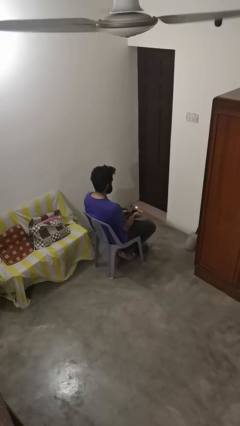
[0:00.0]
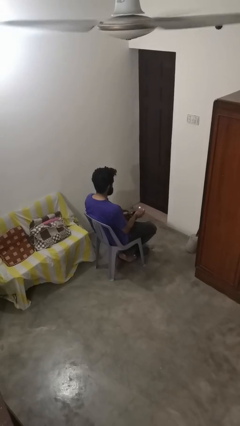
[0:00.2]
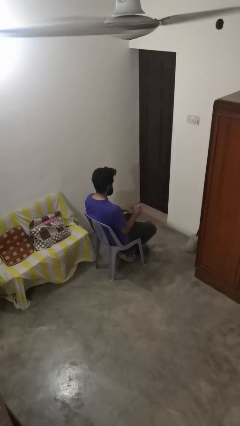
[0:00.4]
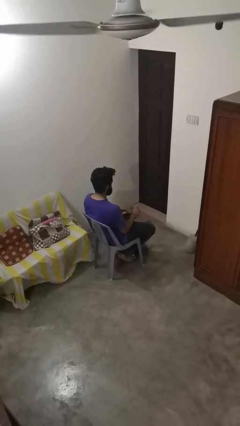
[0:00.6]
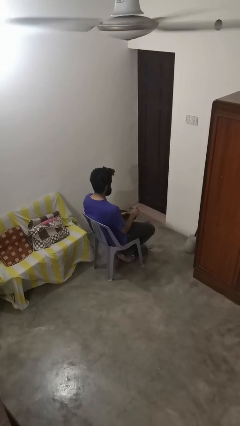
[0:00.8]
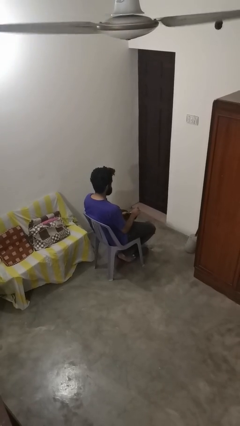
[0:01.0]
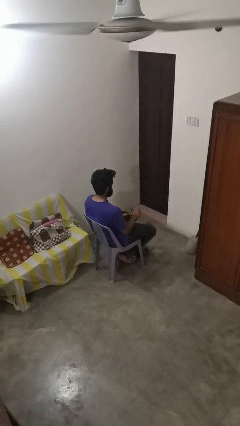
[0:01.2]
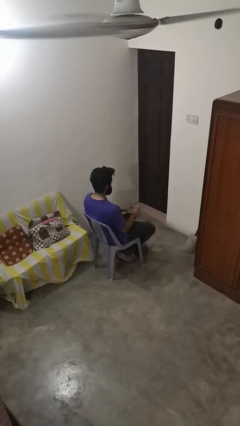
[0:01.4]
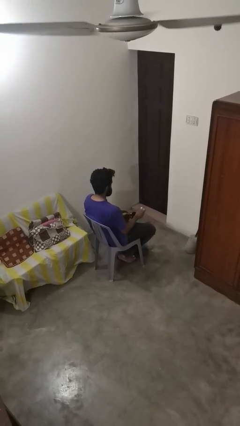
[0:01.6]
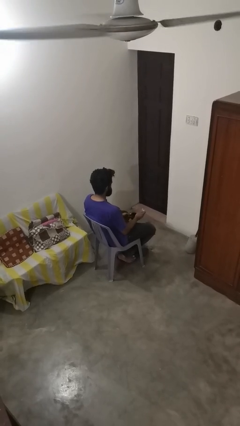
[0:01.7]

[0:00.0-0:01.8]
person stirs mug

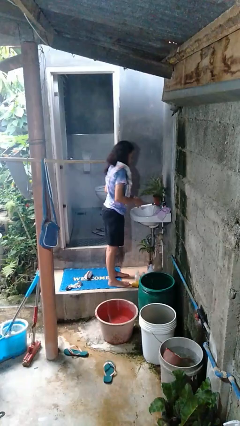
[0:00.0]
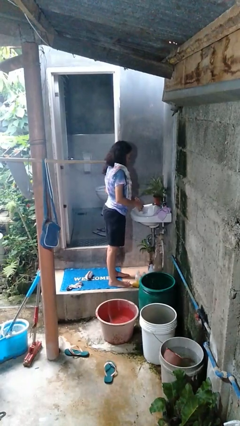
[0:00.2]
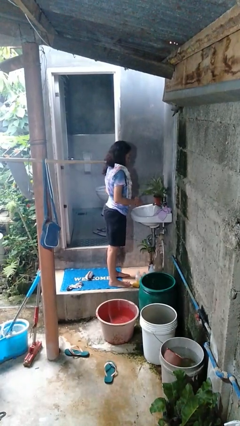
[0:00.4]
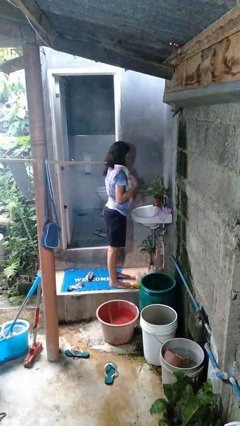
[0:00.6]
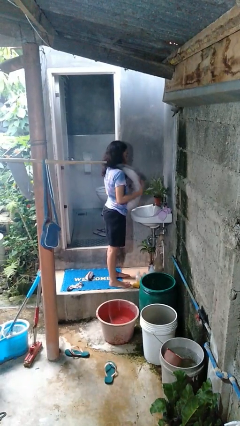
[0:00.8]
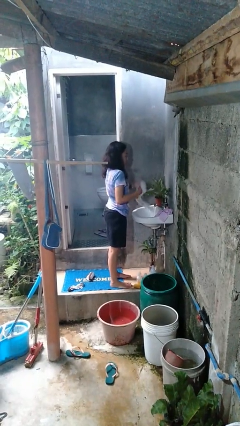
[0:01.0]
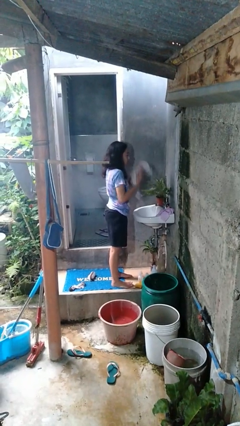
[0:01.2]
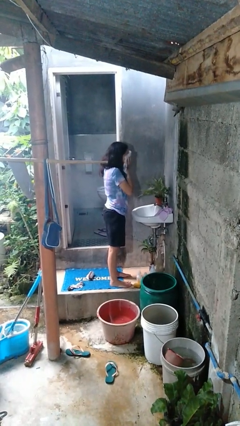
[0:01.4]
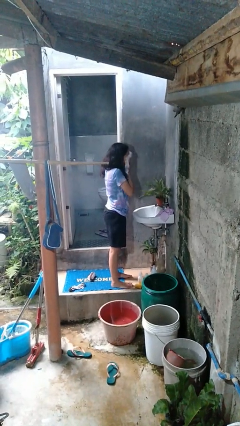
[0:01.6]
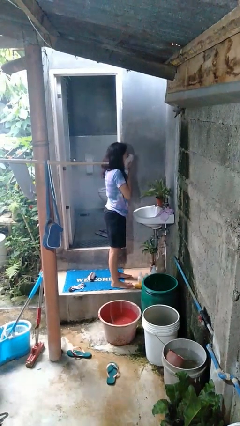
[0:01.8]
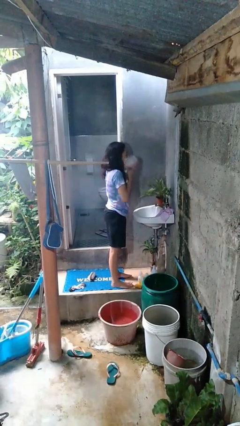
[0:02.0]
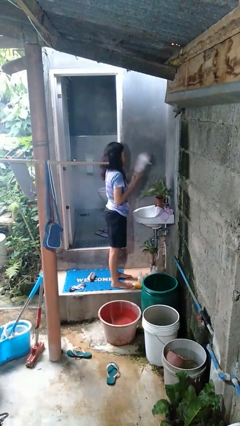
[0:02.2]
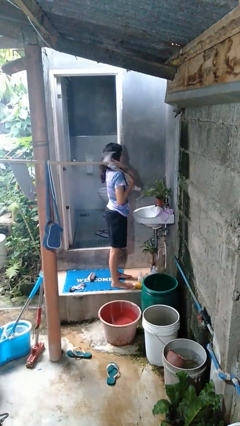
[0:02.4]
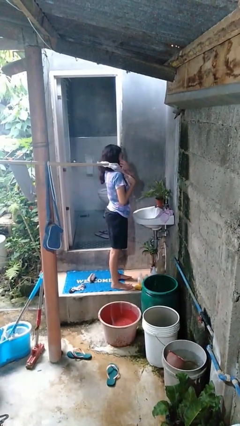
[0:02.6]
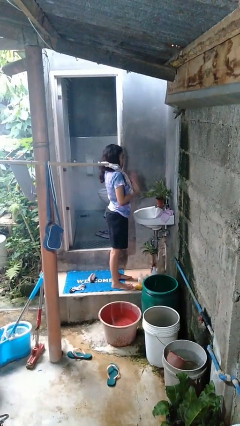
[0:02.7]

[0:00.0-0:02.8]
person dries face with towel

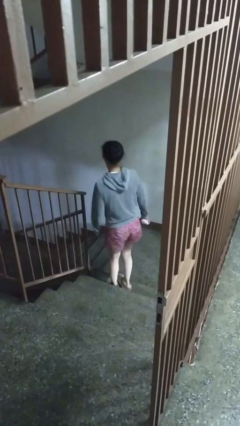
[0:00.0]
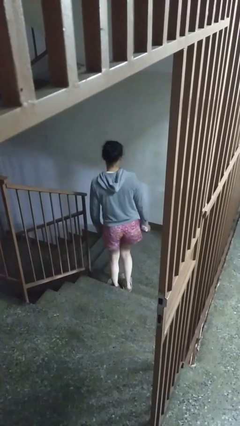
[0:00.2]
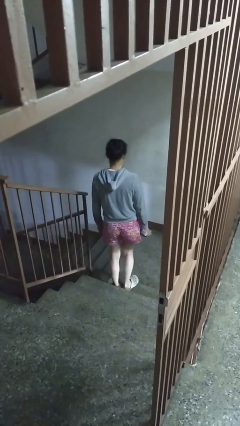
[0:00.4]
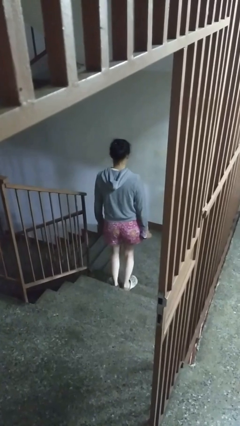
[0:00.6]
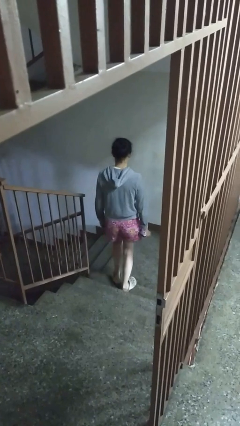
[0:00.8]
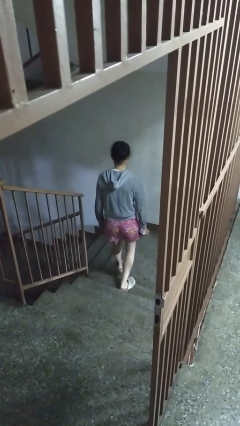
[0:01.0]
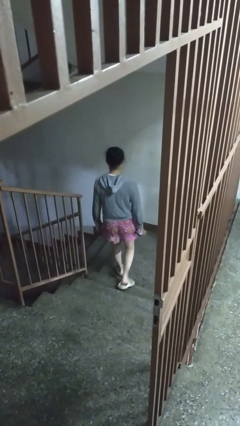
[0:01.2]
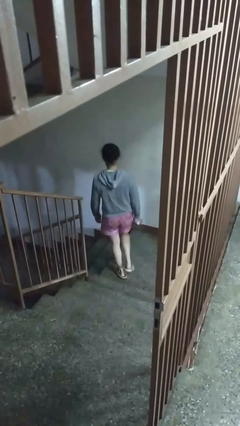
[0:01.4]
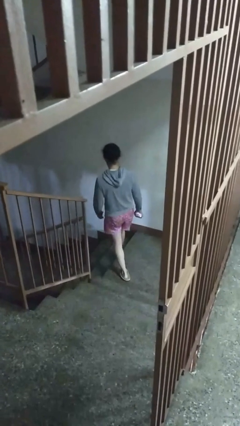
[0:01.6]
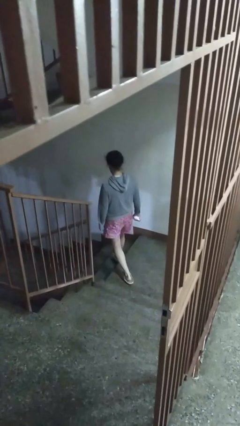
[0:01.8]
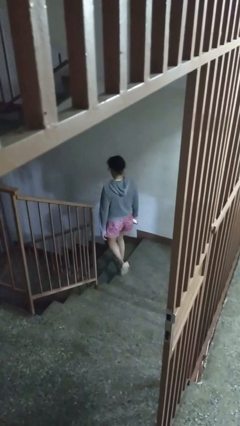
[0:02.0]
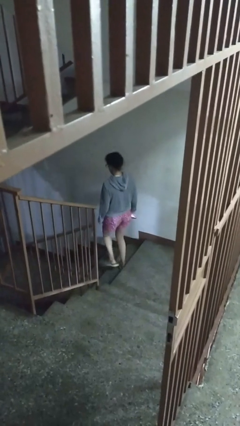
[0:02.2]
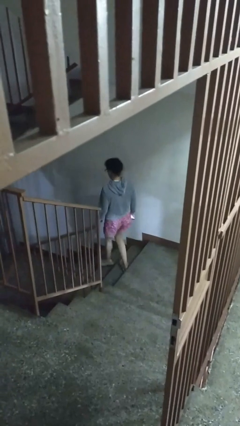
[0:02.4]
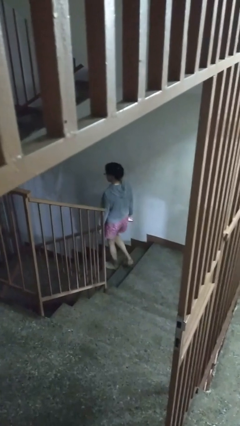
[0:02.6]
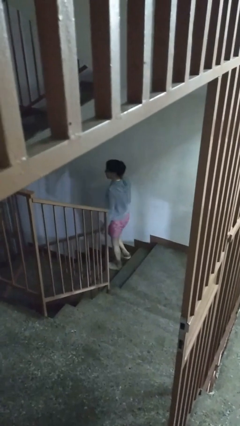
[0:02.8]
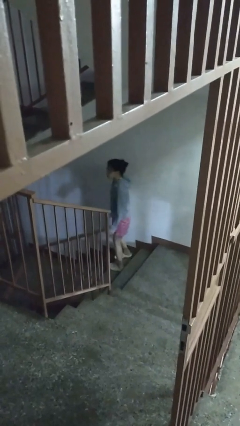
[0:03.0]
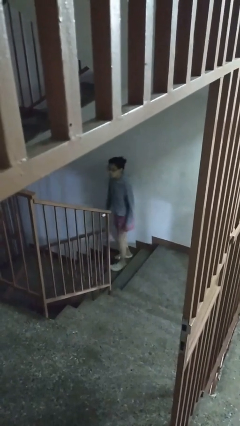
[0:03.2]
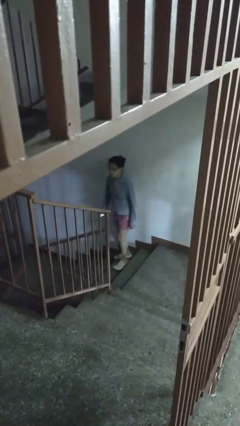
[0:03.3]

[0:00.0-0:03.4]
person climbs down stairs

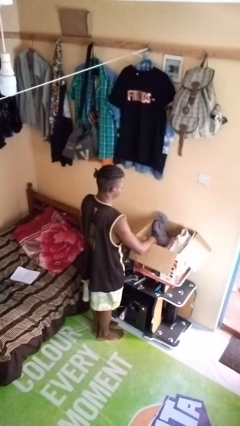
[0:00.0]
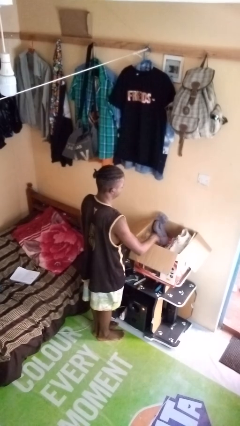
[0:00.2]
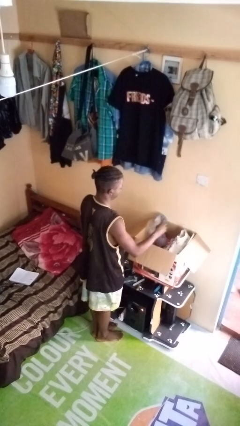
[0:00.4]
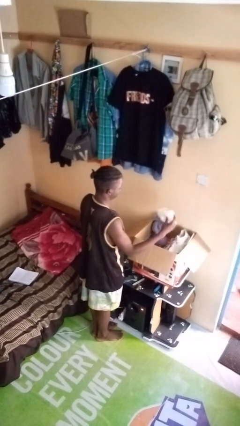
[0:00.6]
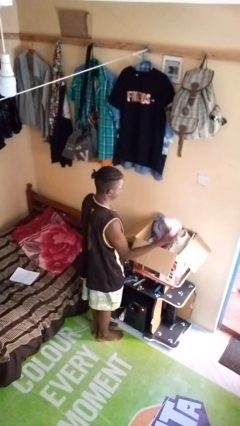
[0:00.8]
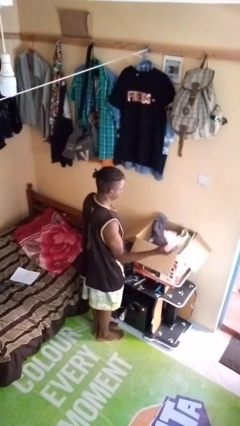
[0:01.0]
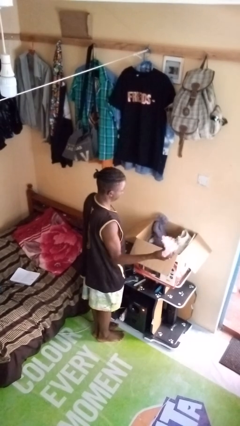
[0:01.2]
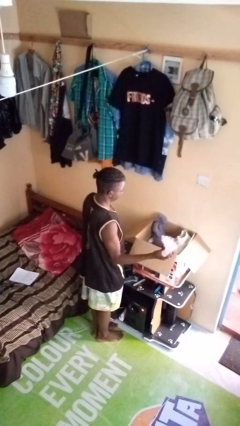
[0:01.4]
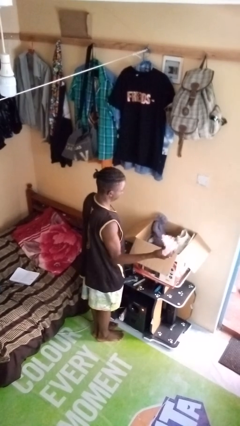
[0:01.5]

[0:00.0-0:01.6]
person takes object from box

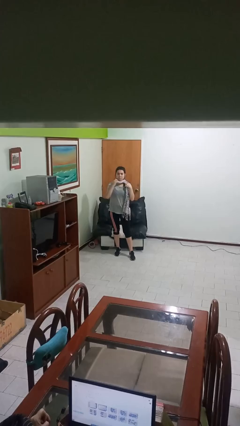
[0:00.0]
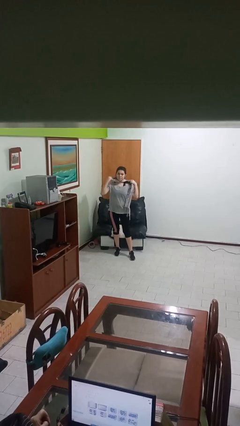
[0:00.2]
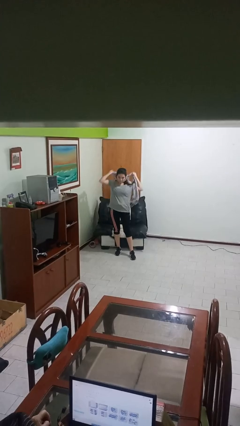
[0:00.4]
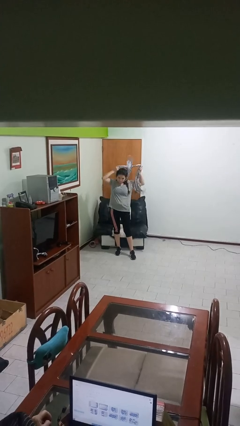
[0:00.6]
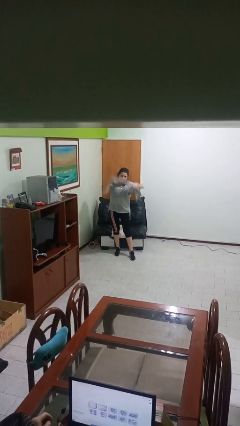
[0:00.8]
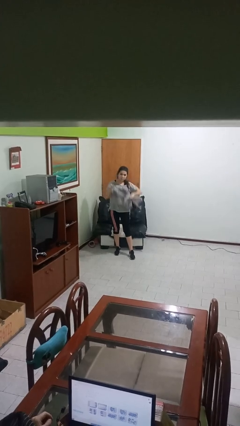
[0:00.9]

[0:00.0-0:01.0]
person takes off scarf

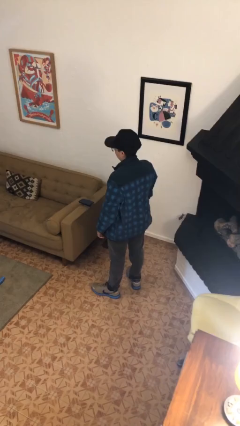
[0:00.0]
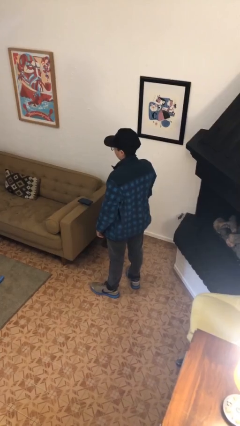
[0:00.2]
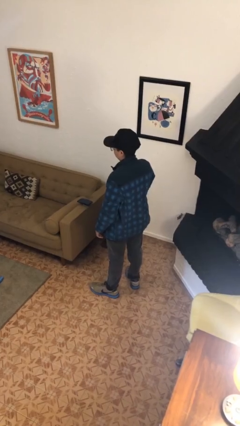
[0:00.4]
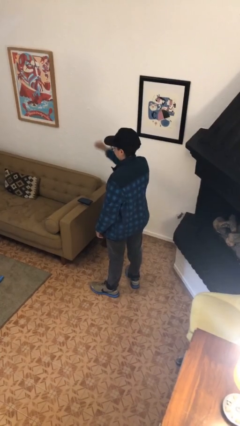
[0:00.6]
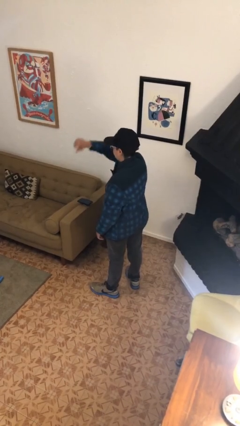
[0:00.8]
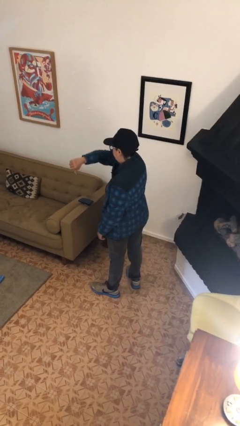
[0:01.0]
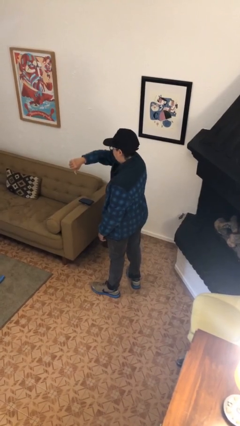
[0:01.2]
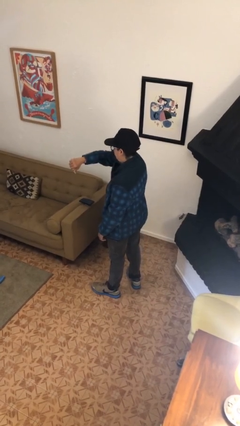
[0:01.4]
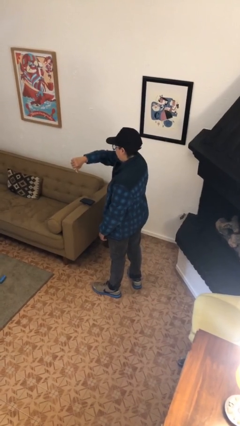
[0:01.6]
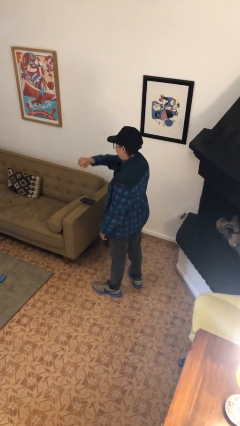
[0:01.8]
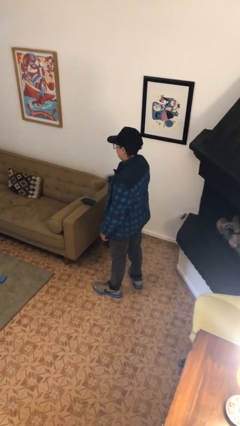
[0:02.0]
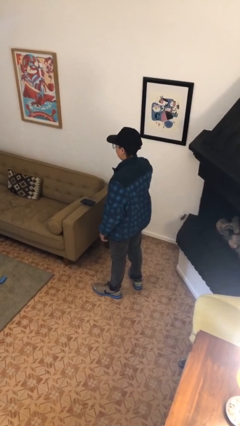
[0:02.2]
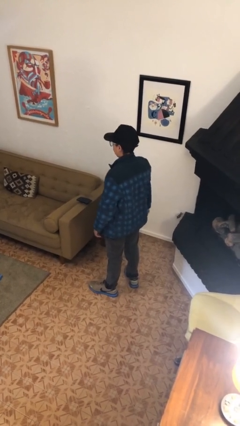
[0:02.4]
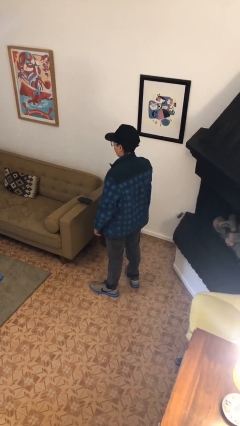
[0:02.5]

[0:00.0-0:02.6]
person gestures thumbs down

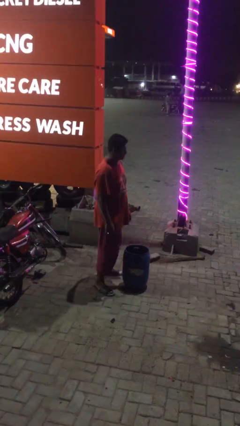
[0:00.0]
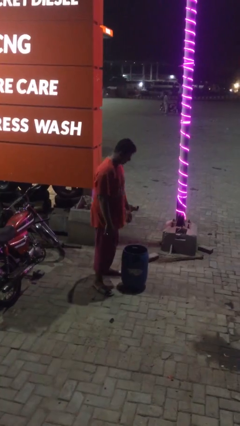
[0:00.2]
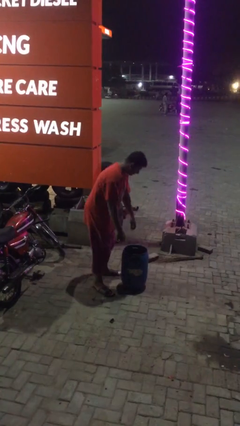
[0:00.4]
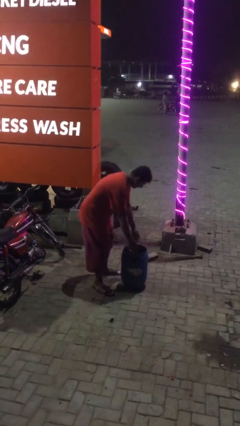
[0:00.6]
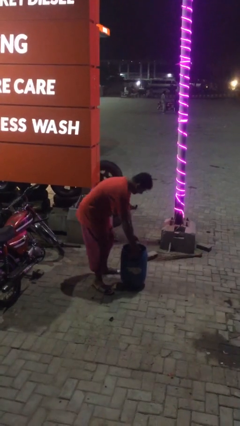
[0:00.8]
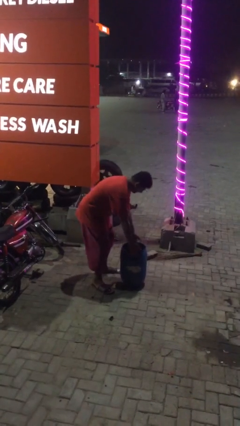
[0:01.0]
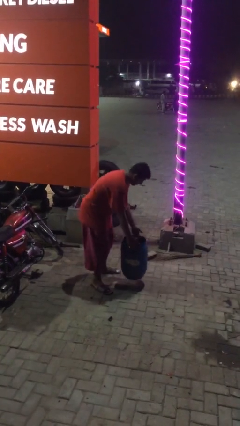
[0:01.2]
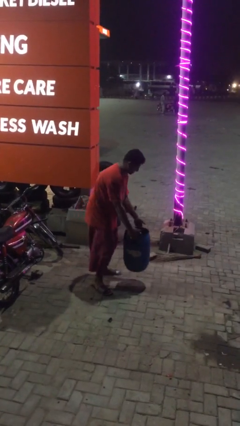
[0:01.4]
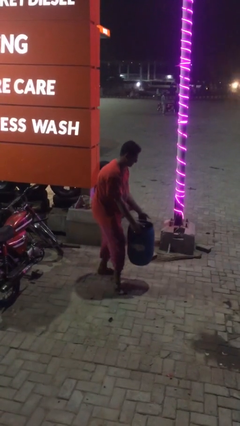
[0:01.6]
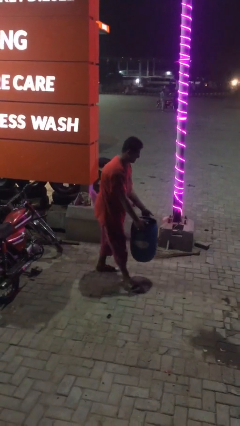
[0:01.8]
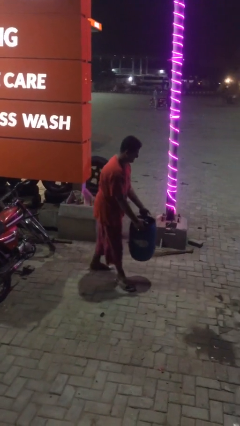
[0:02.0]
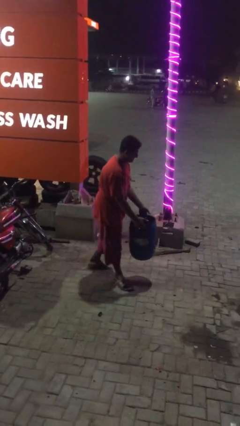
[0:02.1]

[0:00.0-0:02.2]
person picks up object from floor

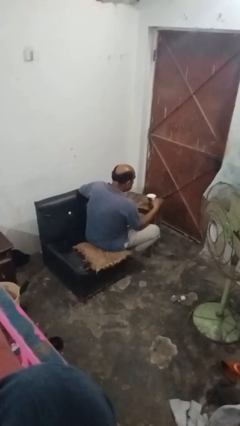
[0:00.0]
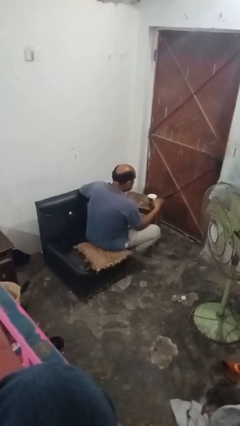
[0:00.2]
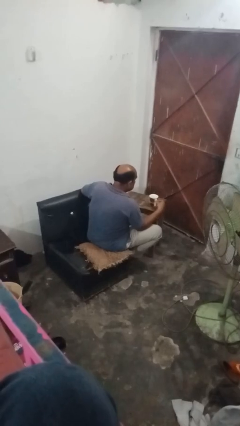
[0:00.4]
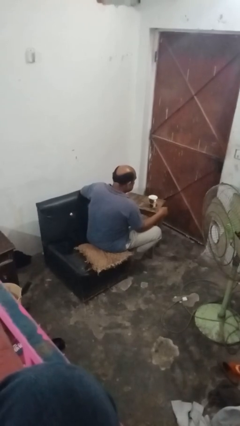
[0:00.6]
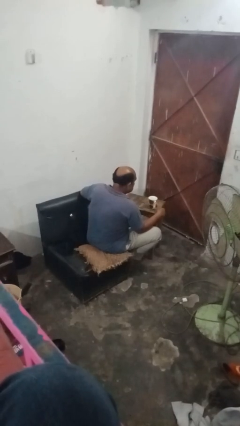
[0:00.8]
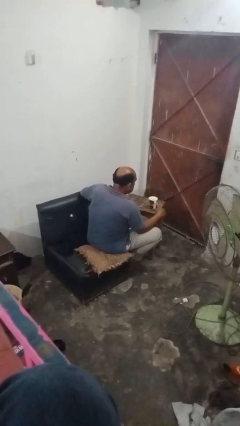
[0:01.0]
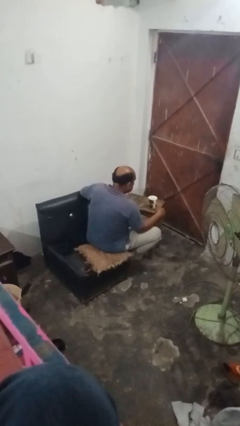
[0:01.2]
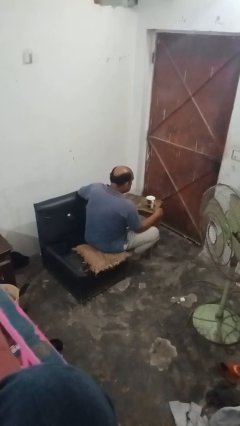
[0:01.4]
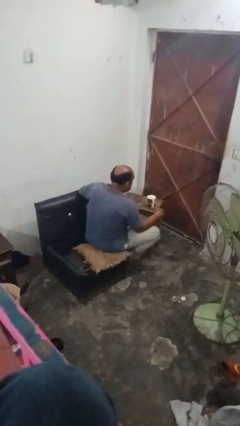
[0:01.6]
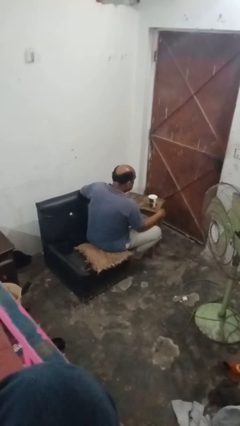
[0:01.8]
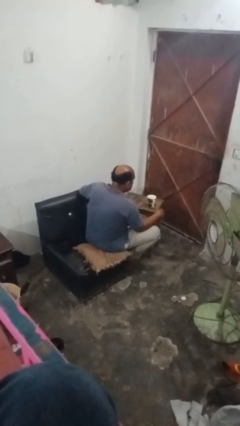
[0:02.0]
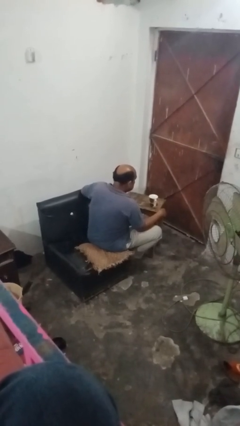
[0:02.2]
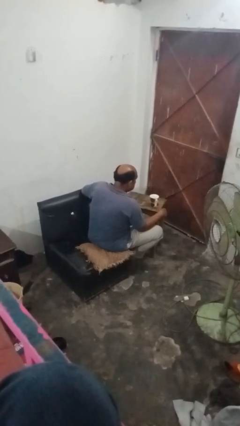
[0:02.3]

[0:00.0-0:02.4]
person puts down object on table
